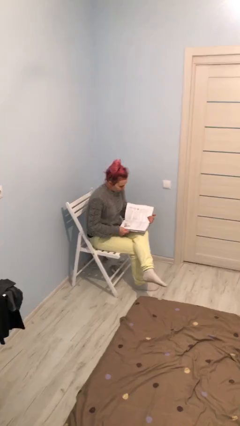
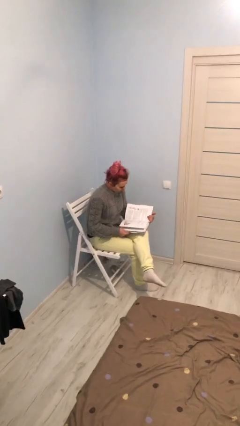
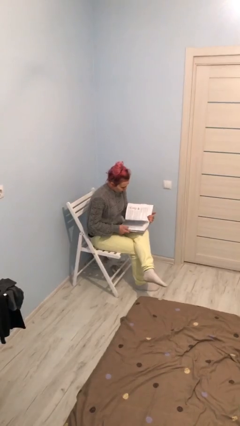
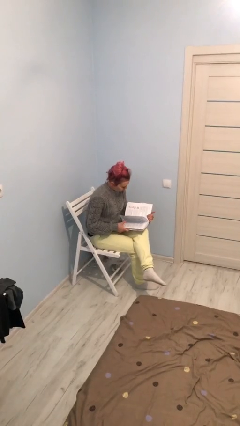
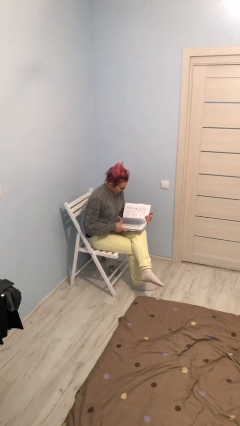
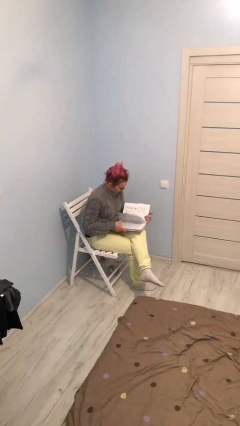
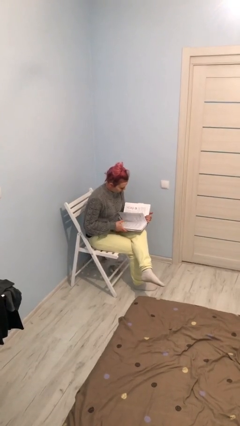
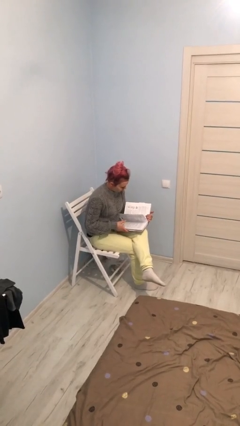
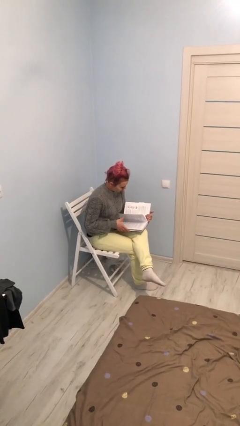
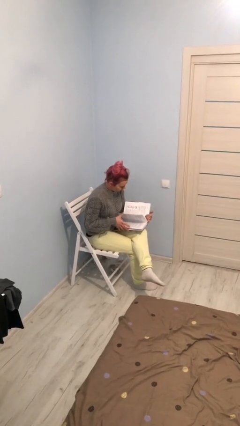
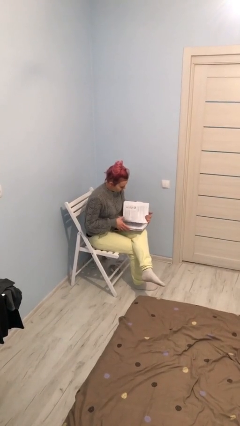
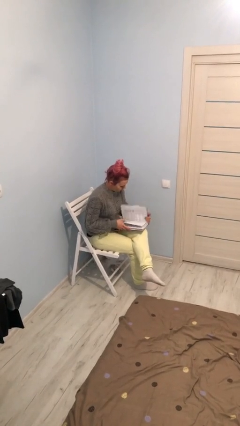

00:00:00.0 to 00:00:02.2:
person reads document

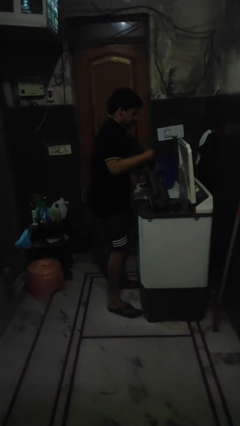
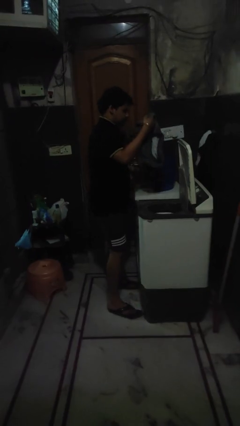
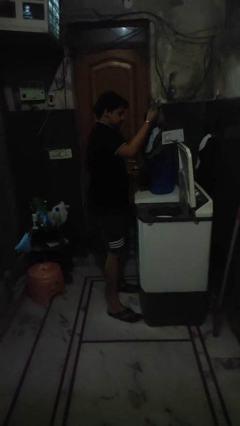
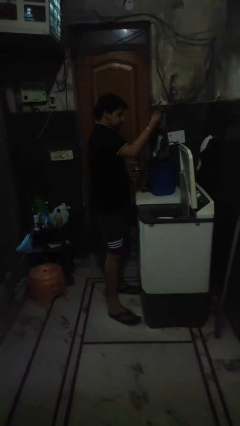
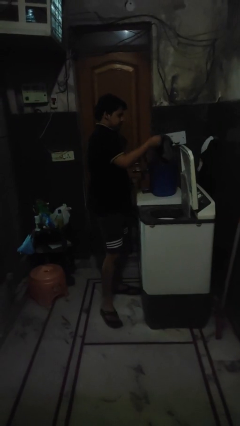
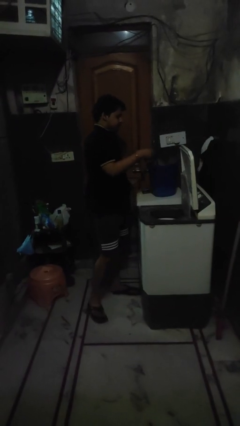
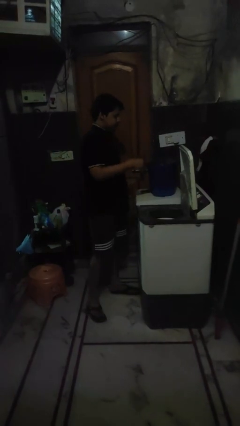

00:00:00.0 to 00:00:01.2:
person unloads clotheswasher

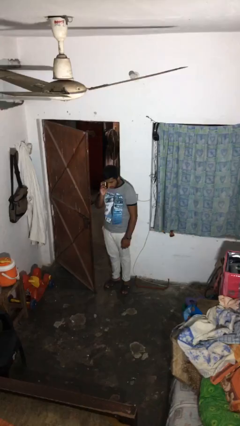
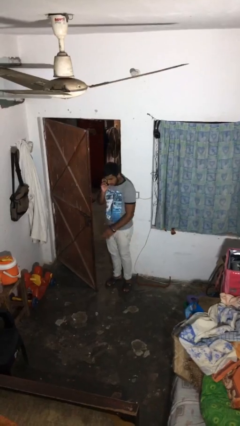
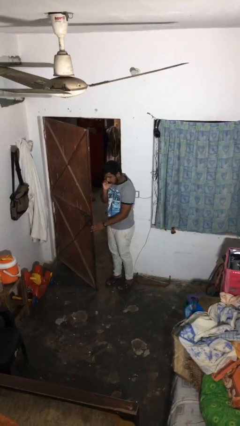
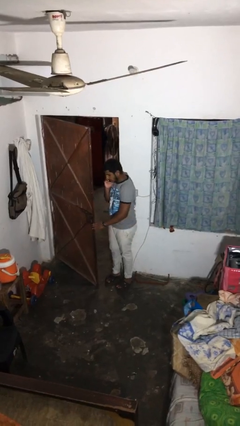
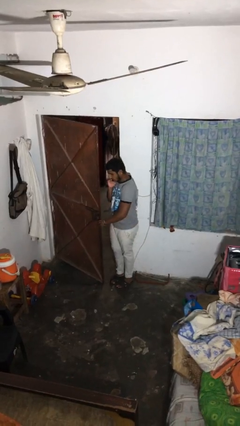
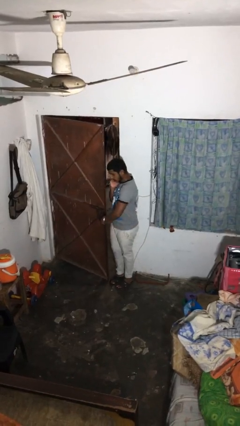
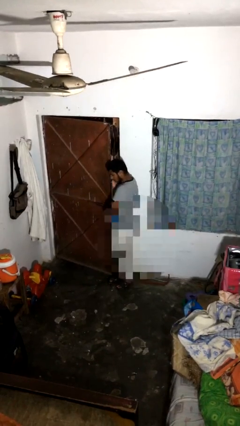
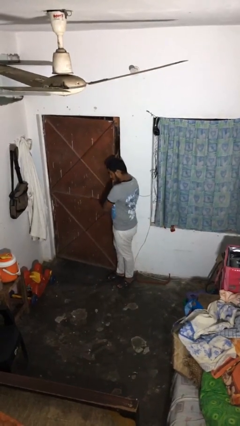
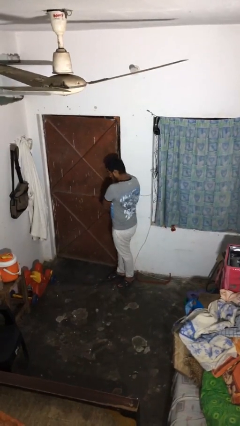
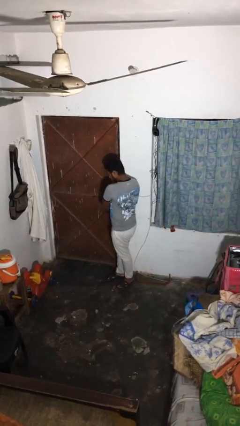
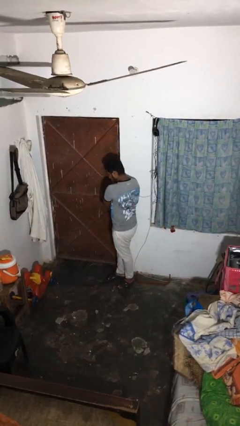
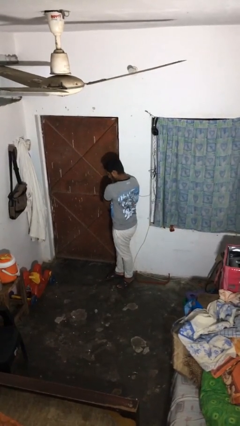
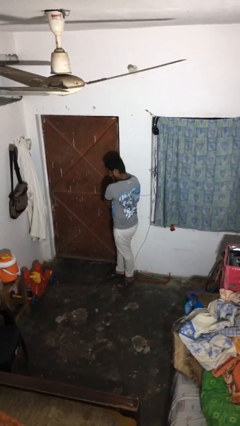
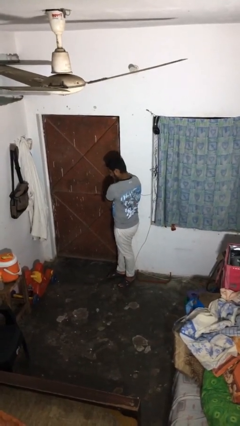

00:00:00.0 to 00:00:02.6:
person closes facility door

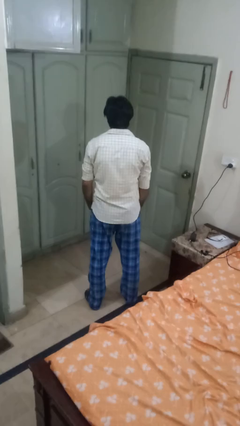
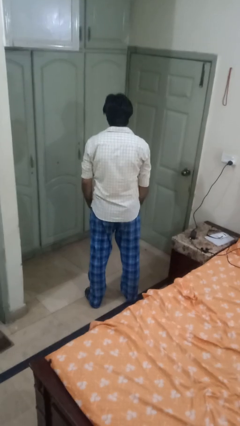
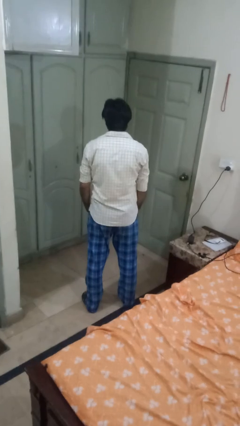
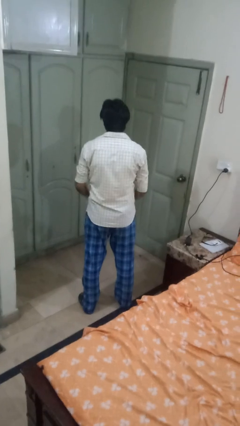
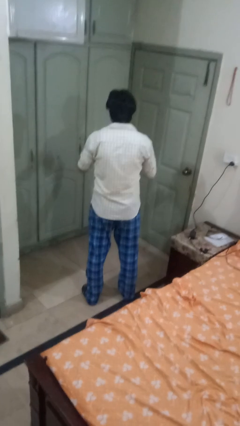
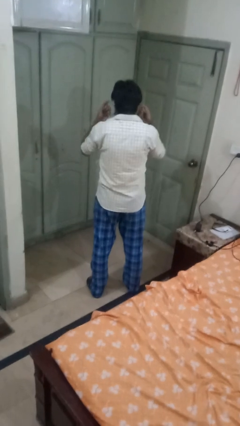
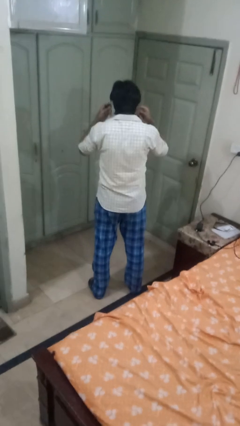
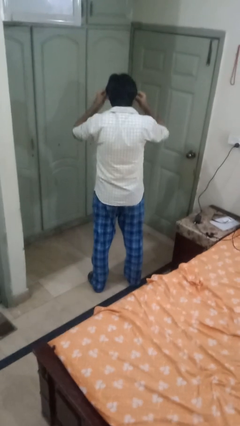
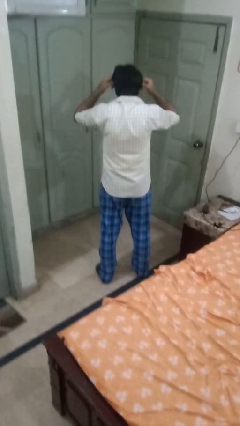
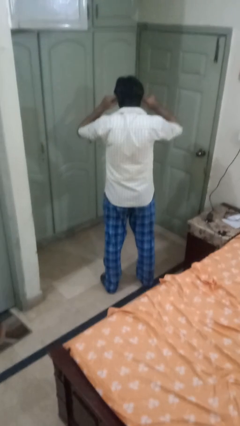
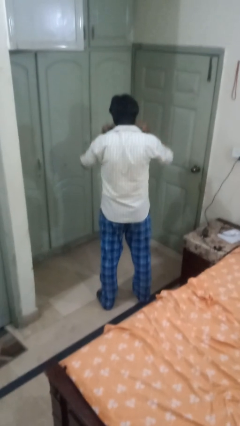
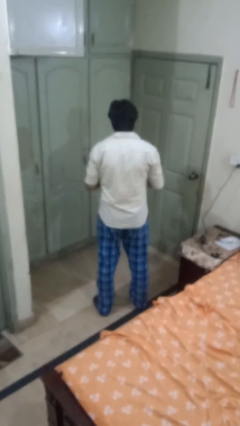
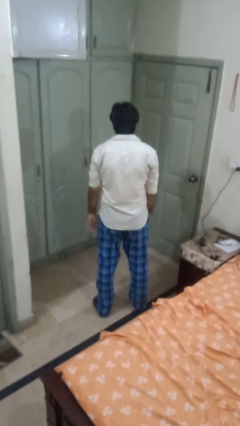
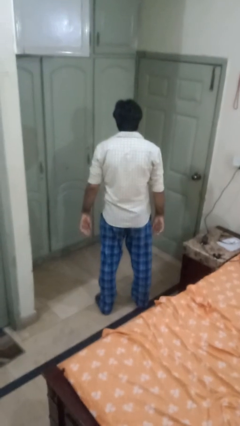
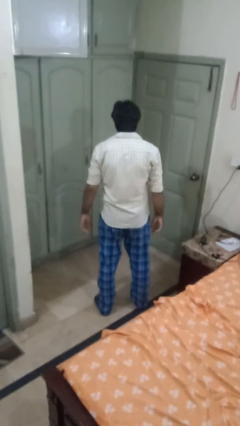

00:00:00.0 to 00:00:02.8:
person puts on facemask

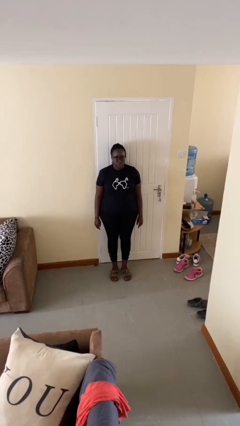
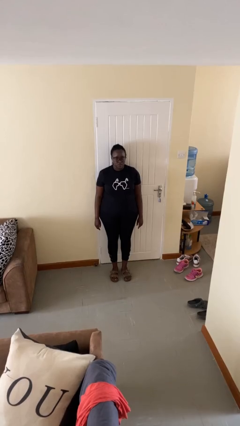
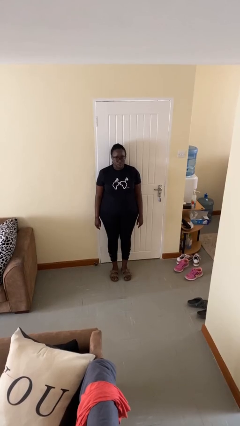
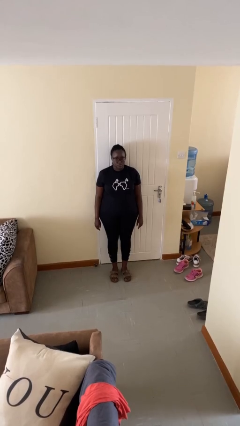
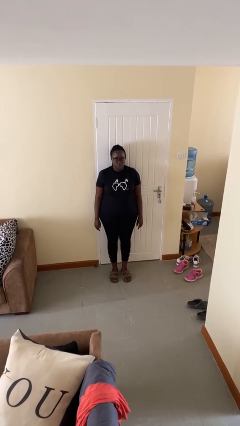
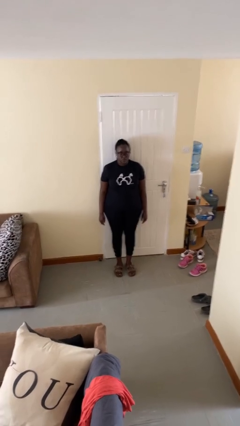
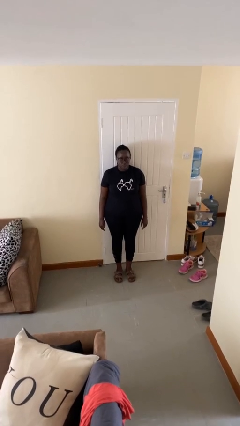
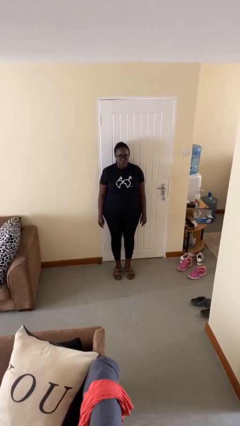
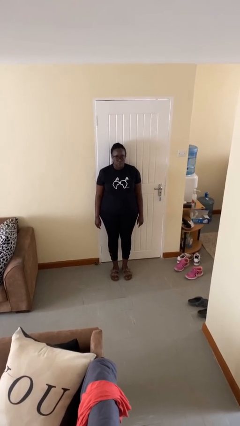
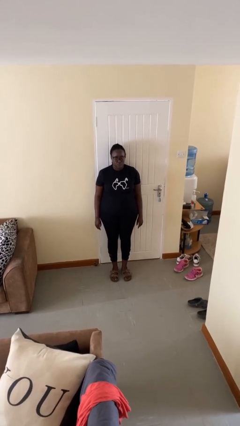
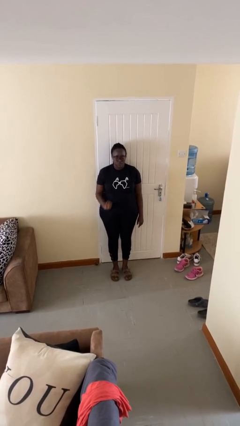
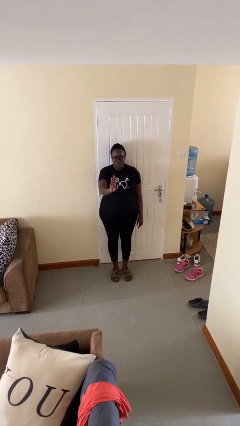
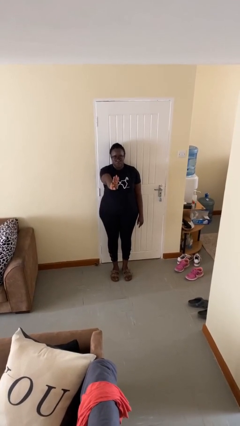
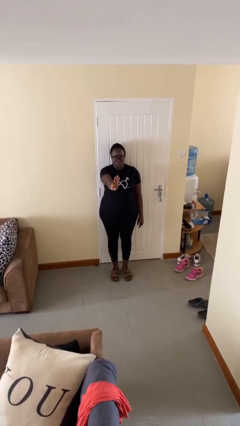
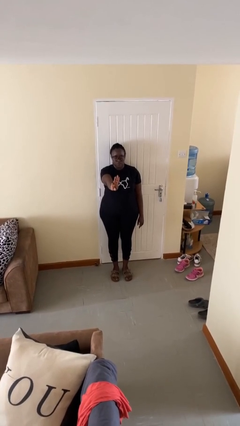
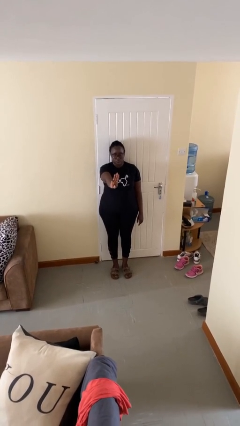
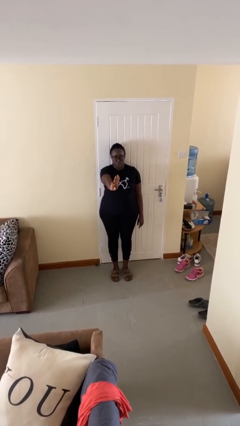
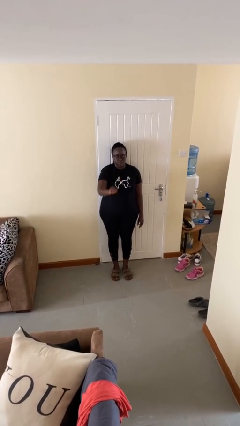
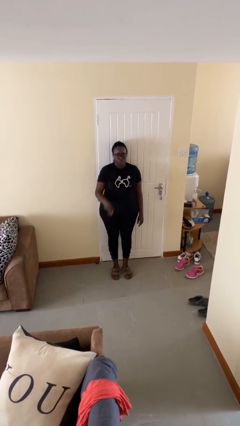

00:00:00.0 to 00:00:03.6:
person gestures number three

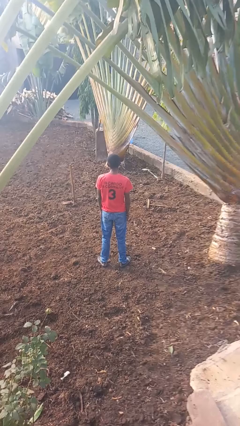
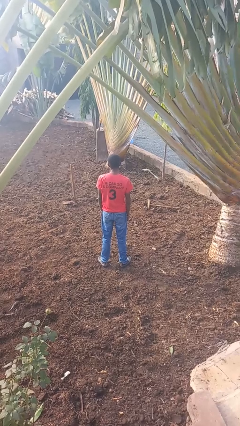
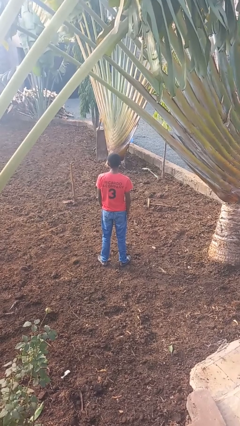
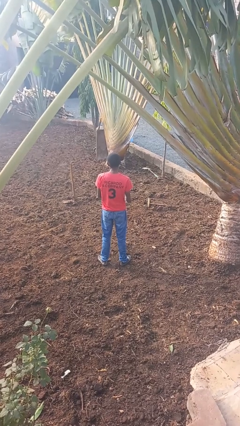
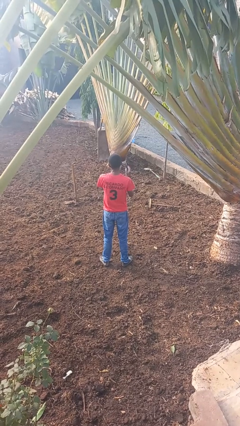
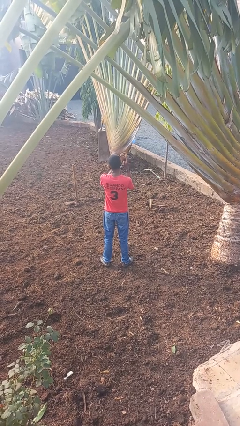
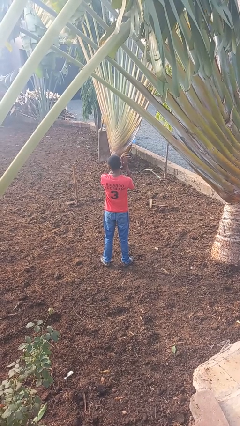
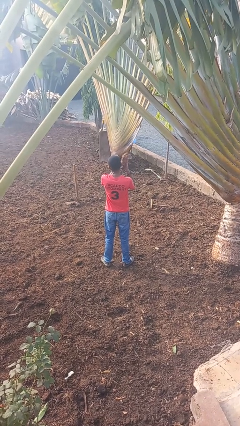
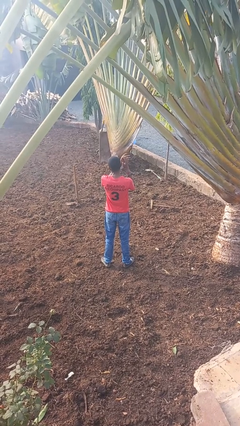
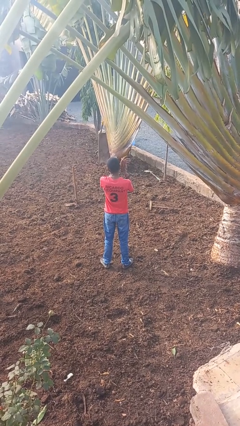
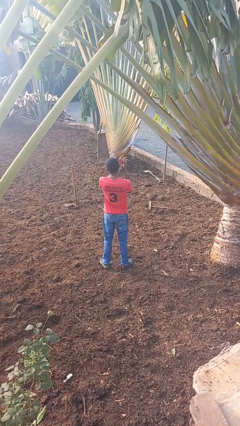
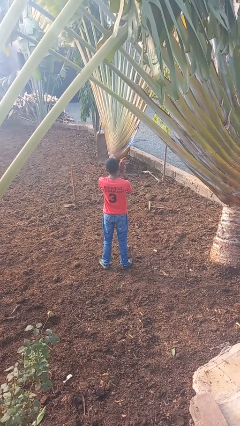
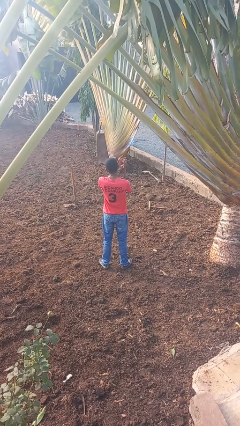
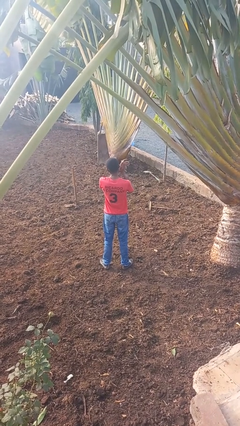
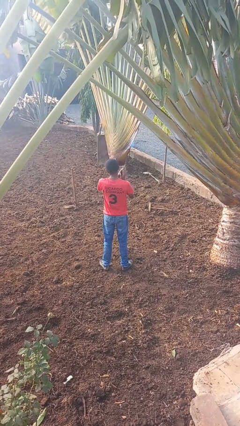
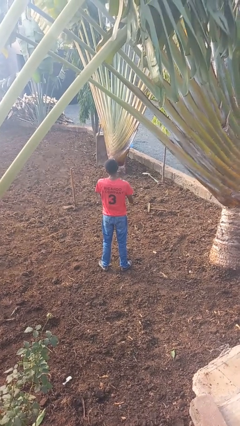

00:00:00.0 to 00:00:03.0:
person claps hands

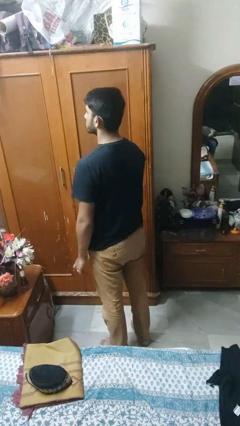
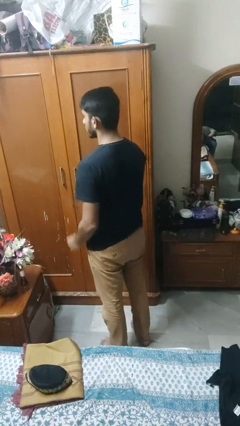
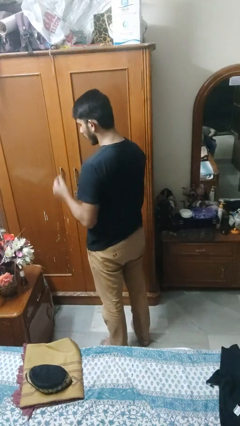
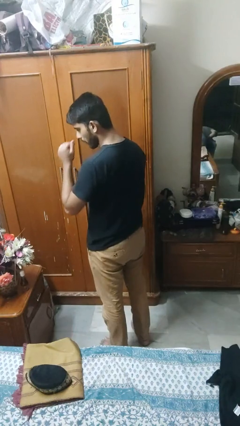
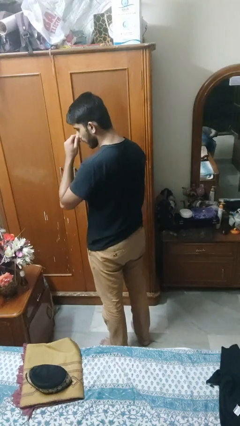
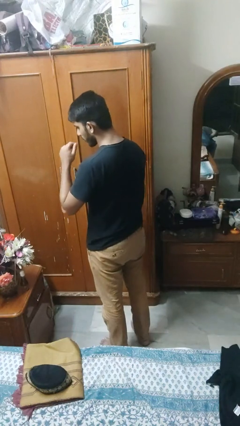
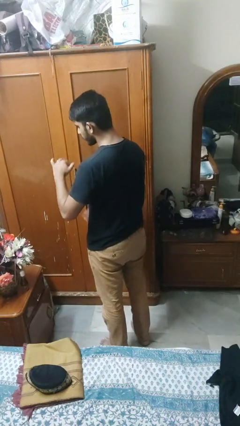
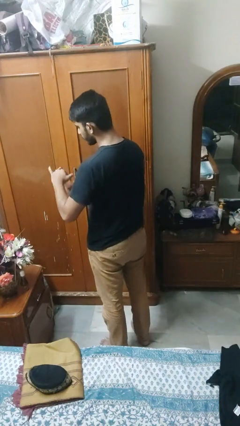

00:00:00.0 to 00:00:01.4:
person takes off ring
